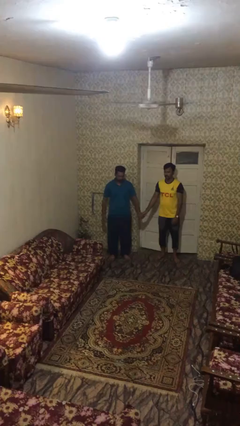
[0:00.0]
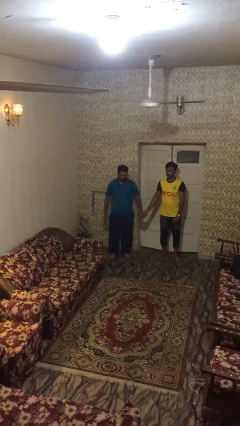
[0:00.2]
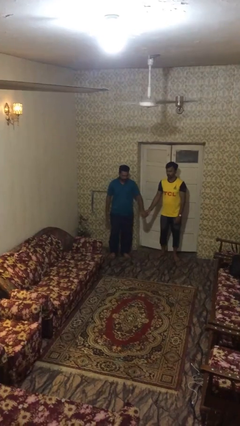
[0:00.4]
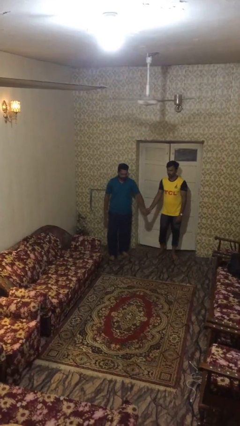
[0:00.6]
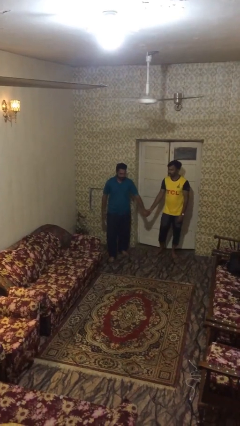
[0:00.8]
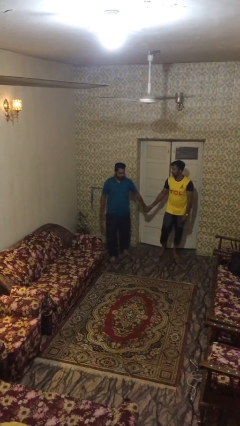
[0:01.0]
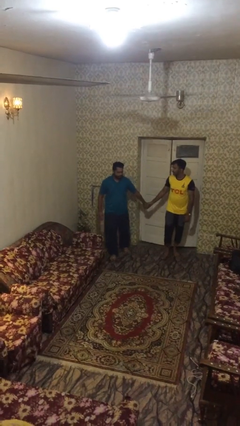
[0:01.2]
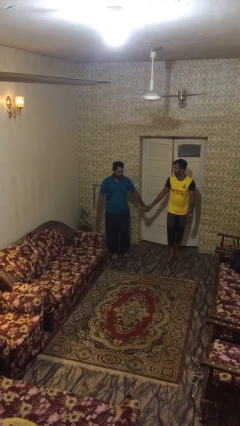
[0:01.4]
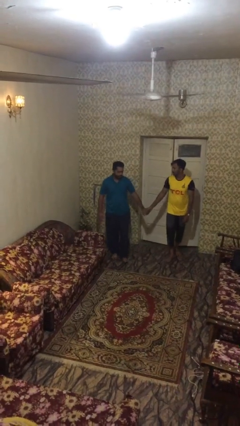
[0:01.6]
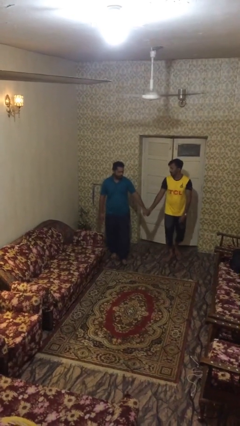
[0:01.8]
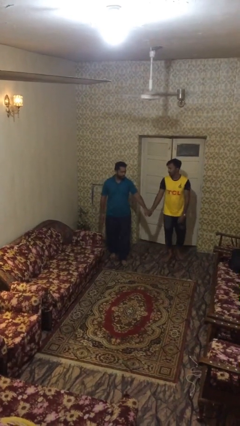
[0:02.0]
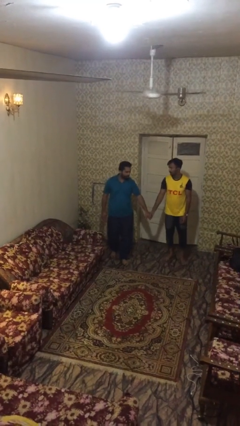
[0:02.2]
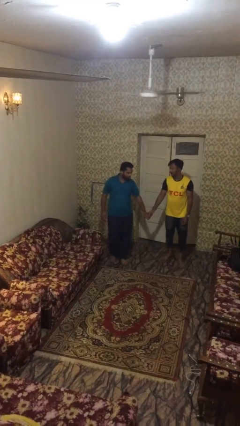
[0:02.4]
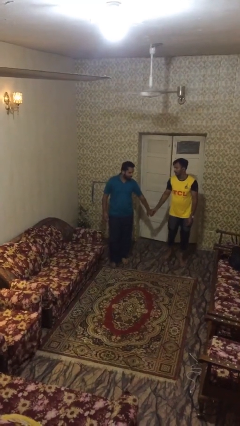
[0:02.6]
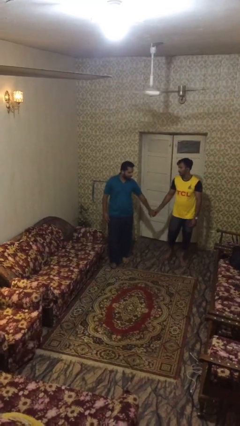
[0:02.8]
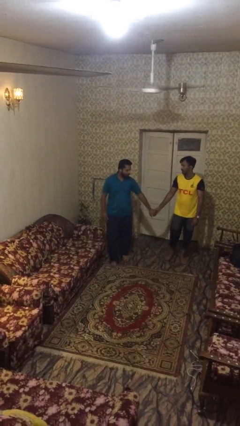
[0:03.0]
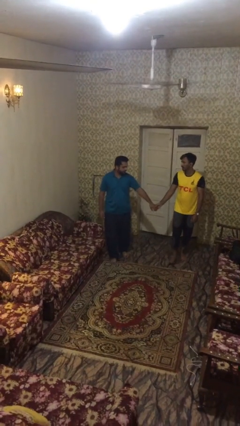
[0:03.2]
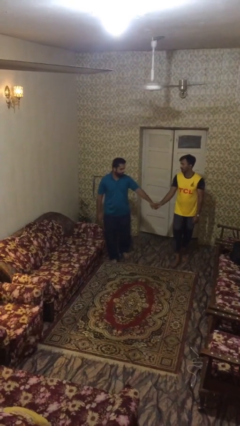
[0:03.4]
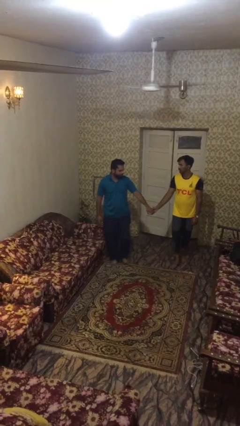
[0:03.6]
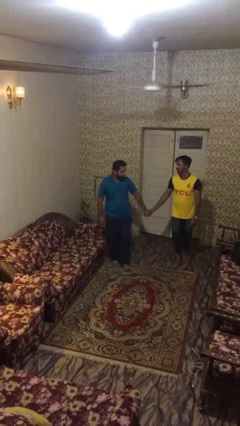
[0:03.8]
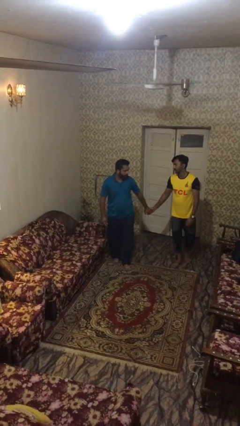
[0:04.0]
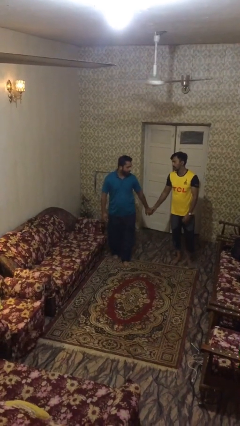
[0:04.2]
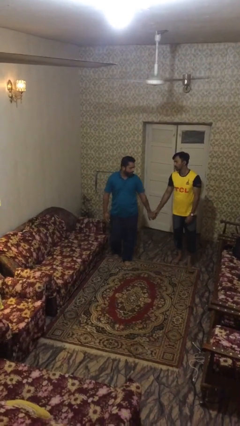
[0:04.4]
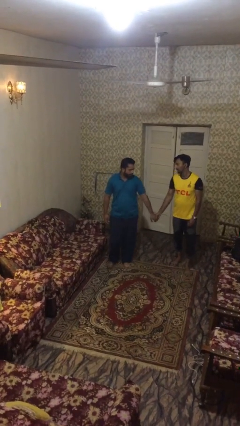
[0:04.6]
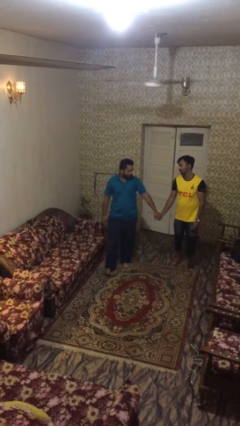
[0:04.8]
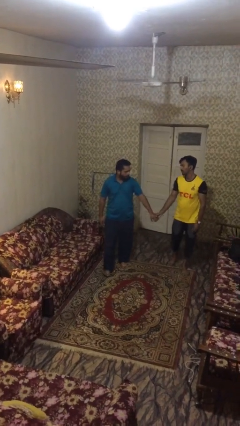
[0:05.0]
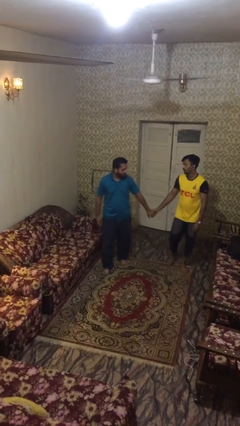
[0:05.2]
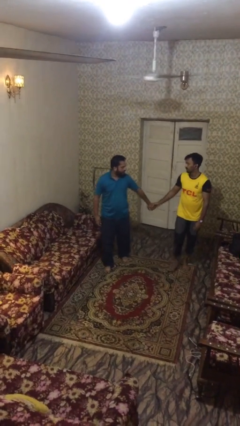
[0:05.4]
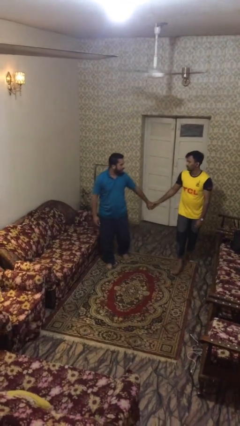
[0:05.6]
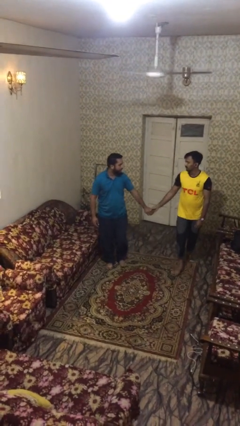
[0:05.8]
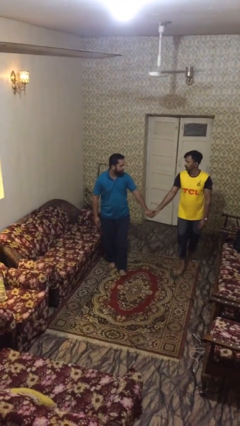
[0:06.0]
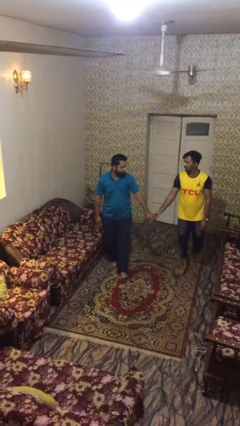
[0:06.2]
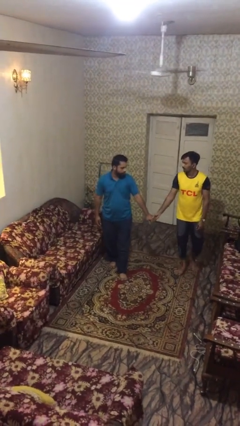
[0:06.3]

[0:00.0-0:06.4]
person holds hand

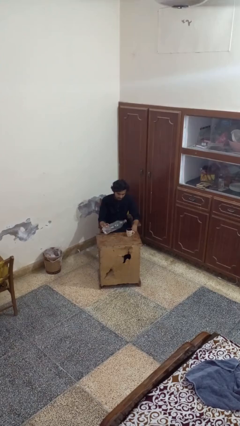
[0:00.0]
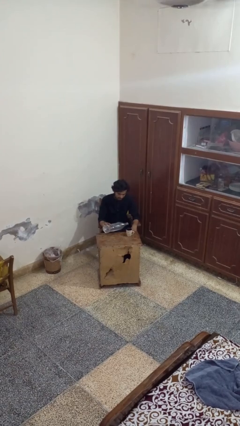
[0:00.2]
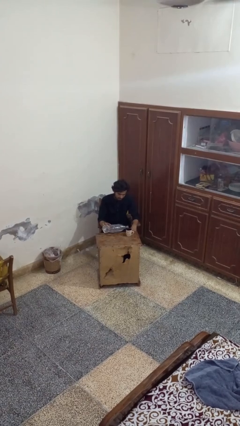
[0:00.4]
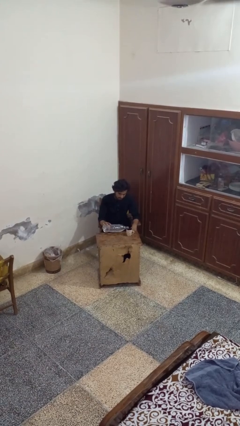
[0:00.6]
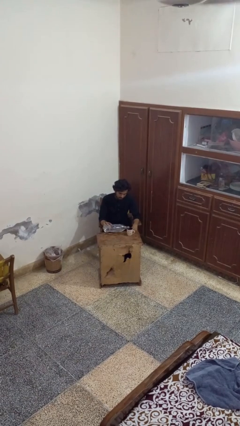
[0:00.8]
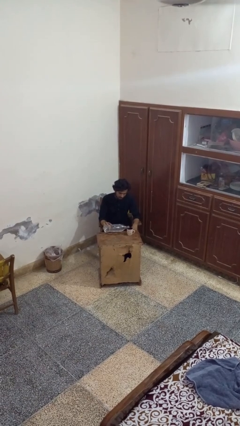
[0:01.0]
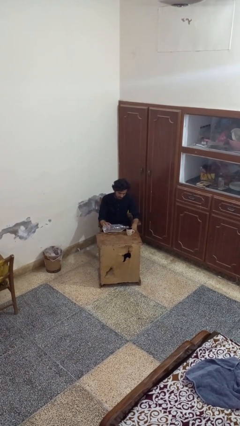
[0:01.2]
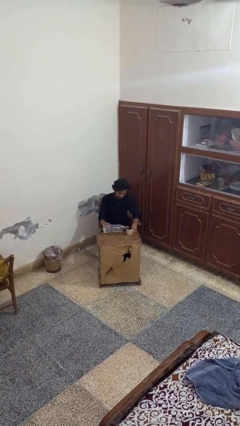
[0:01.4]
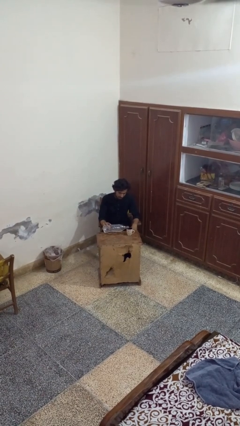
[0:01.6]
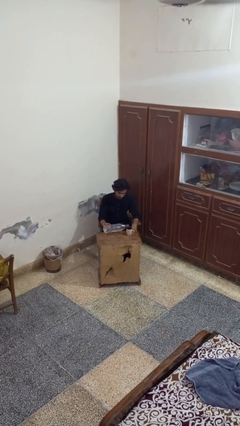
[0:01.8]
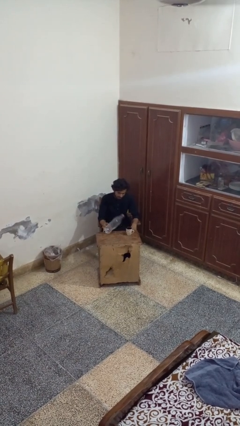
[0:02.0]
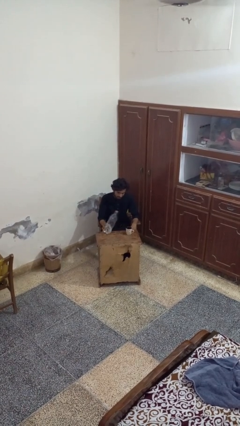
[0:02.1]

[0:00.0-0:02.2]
person pours liquid into cup

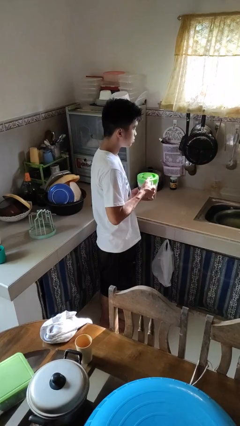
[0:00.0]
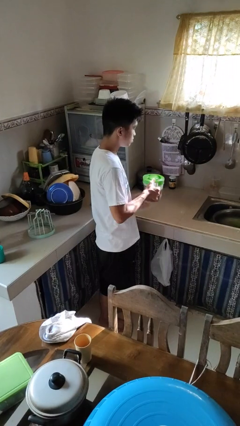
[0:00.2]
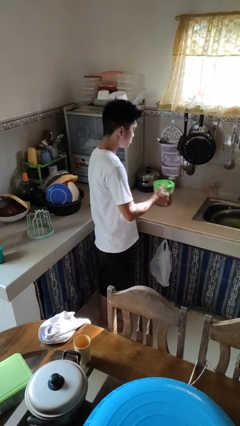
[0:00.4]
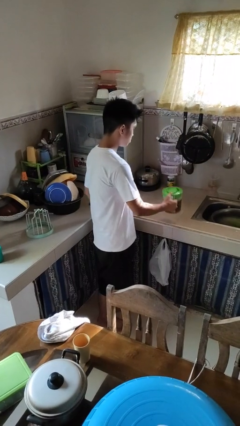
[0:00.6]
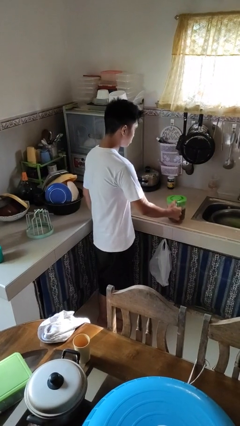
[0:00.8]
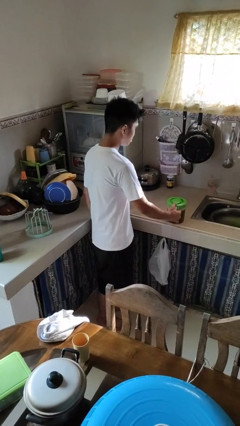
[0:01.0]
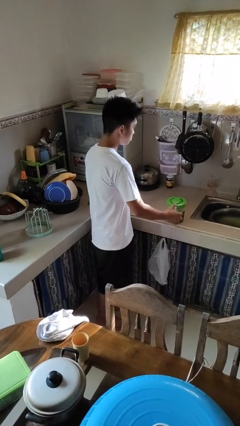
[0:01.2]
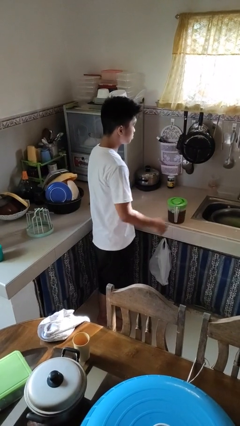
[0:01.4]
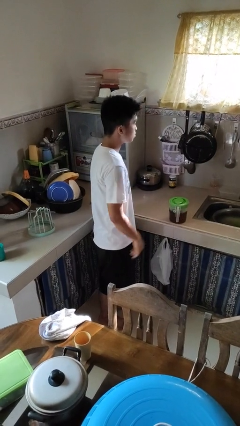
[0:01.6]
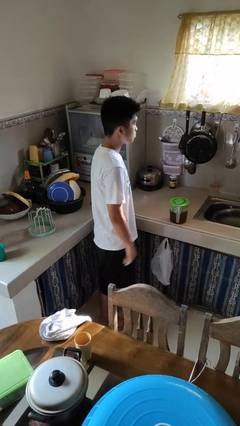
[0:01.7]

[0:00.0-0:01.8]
person puts down object on countertop

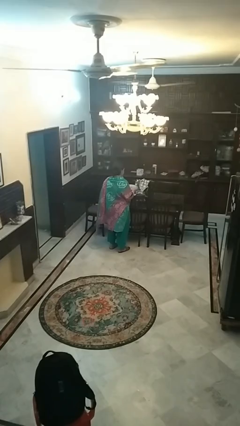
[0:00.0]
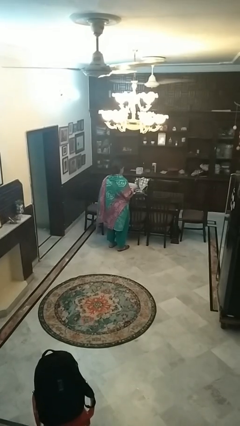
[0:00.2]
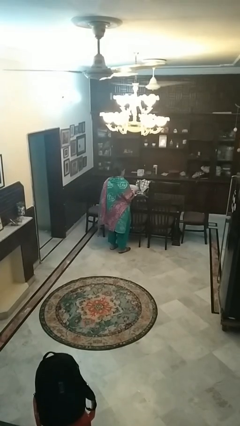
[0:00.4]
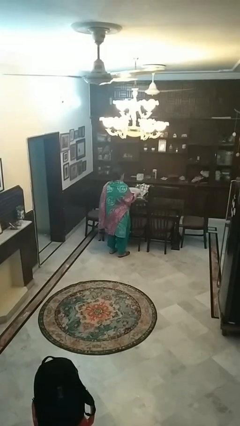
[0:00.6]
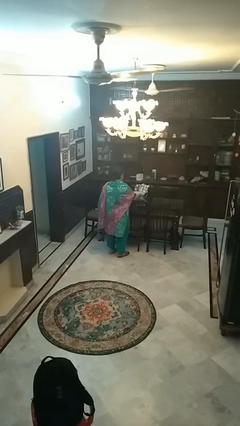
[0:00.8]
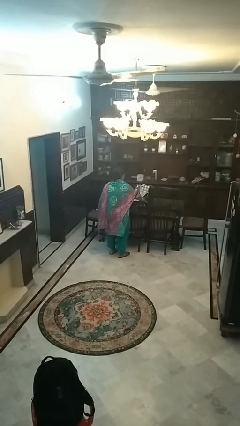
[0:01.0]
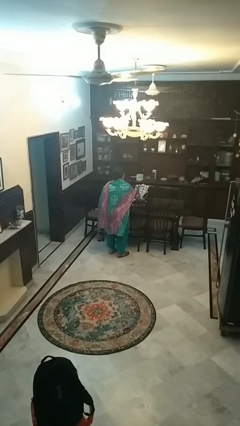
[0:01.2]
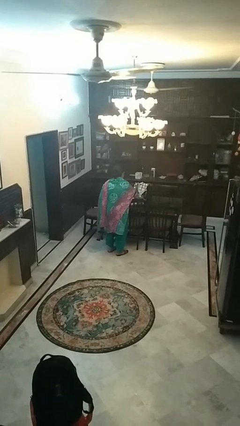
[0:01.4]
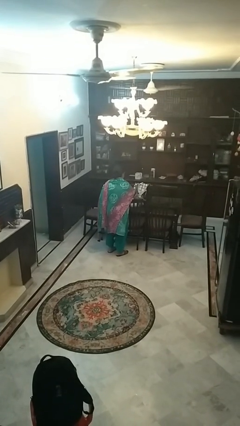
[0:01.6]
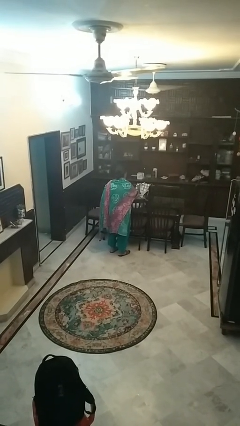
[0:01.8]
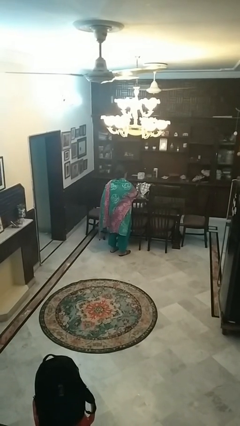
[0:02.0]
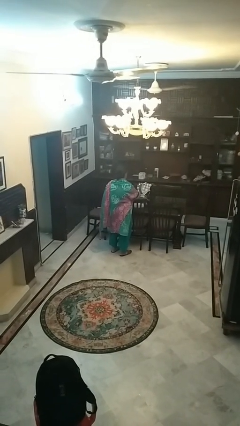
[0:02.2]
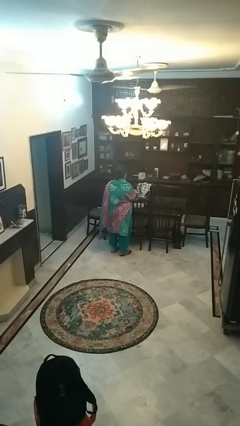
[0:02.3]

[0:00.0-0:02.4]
person sets table

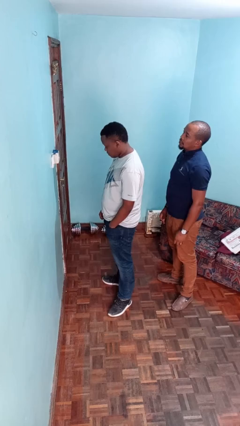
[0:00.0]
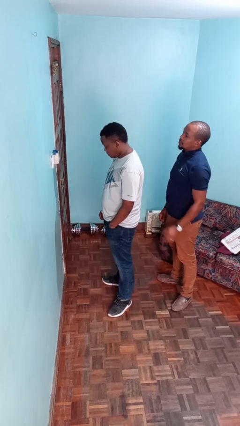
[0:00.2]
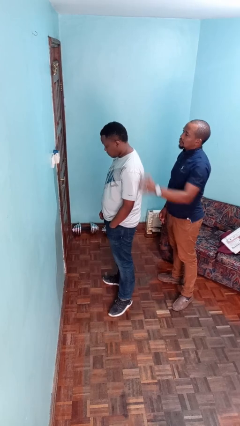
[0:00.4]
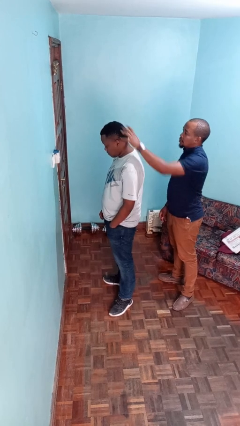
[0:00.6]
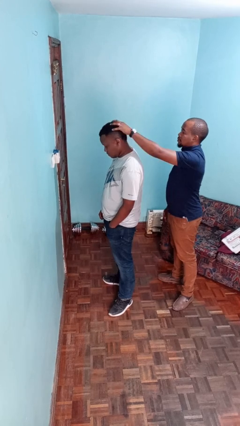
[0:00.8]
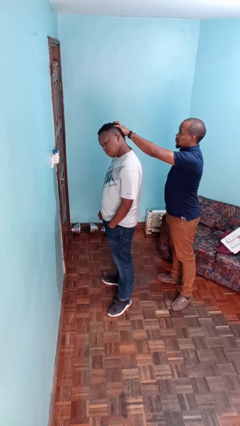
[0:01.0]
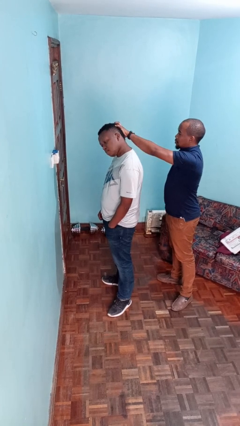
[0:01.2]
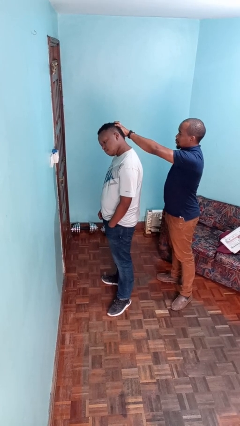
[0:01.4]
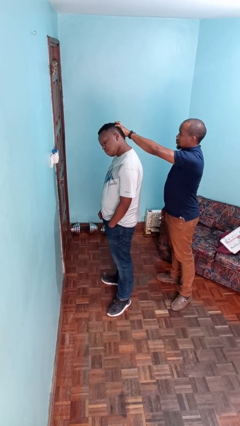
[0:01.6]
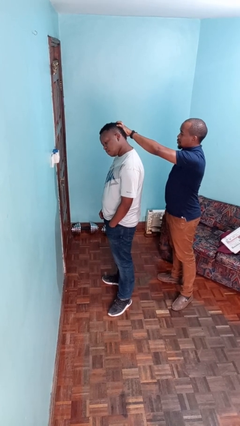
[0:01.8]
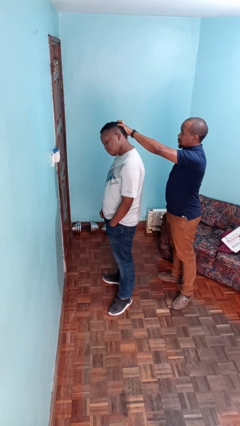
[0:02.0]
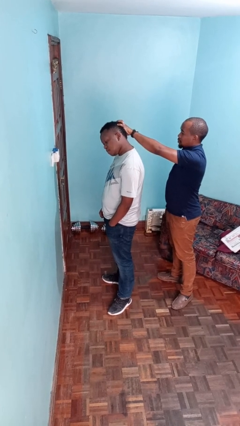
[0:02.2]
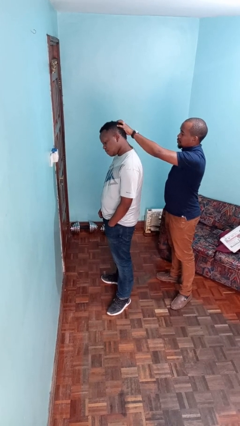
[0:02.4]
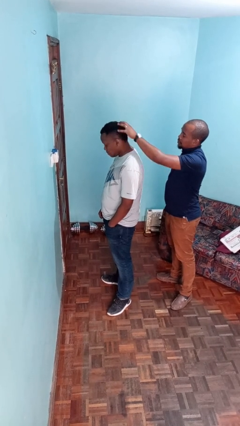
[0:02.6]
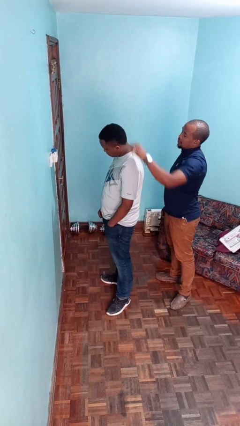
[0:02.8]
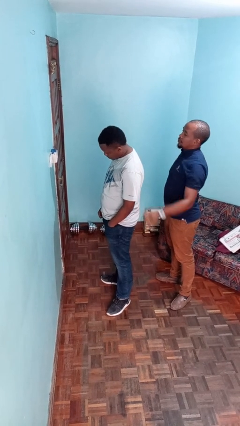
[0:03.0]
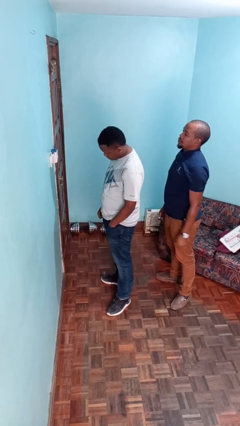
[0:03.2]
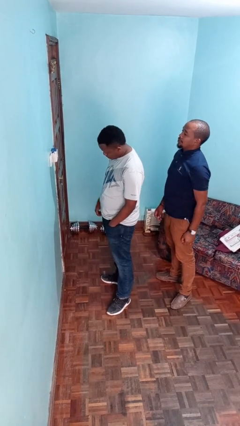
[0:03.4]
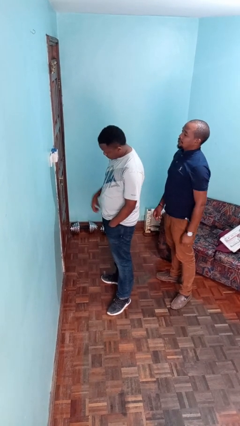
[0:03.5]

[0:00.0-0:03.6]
person grabs person by hair

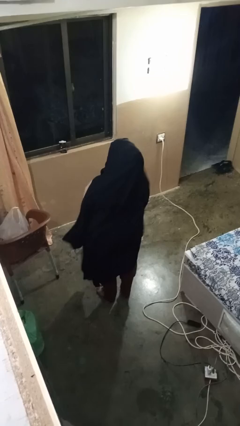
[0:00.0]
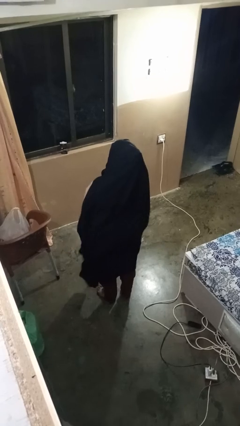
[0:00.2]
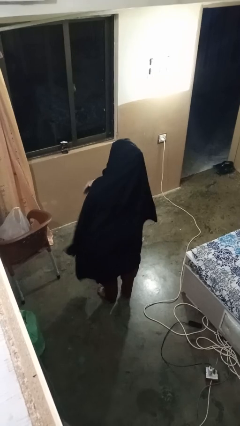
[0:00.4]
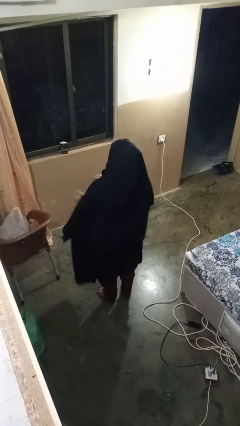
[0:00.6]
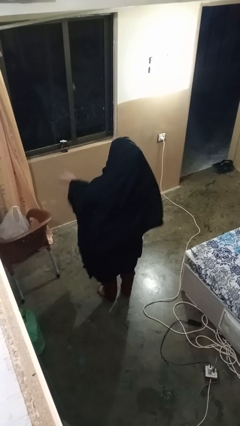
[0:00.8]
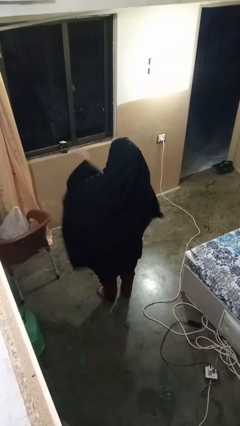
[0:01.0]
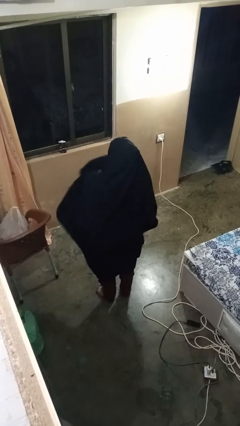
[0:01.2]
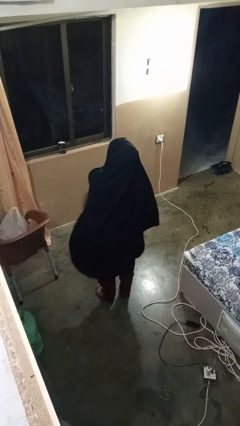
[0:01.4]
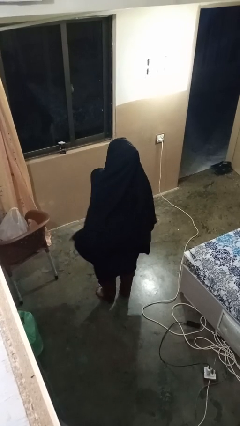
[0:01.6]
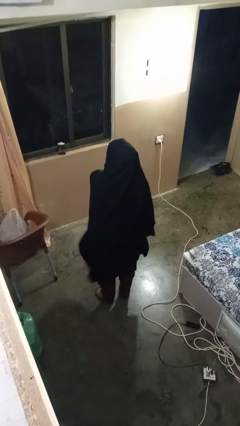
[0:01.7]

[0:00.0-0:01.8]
person gestures swipe right
